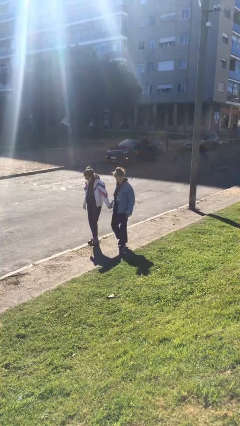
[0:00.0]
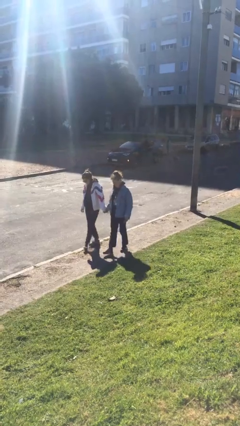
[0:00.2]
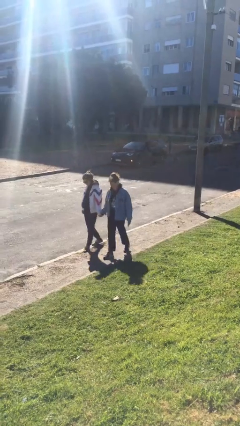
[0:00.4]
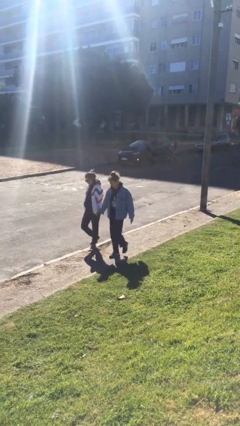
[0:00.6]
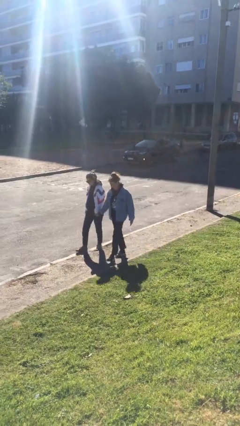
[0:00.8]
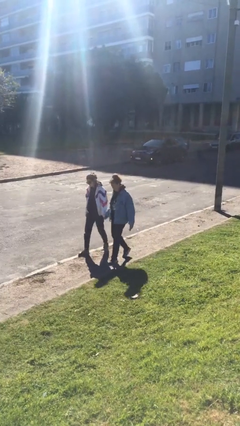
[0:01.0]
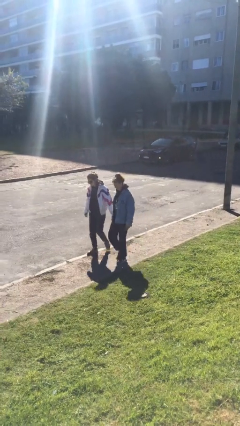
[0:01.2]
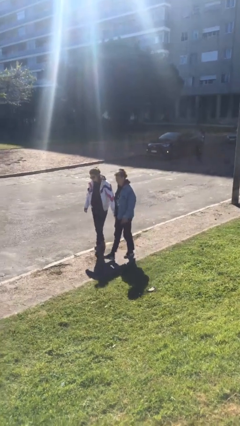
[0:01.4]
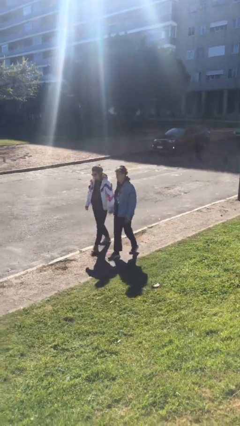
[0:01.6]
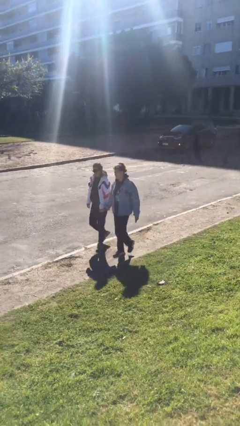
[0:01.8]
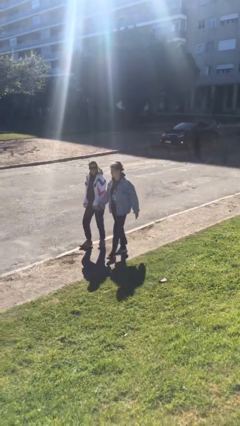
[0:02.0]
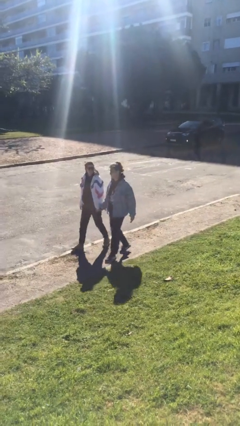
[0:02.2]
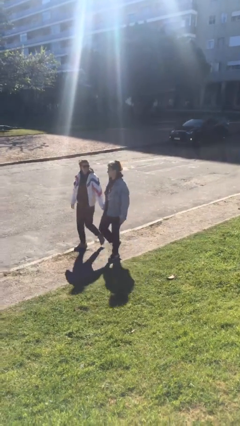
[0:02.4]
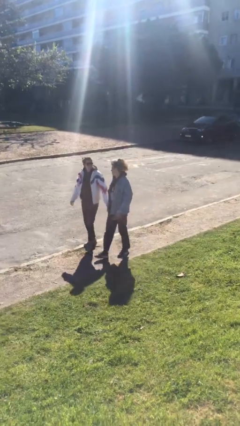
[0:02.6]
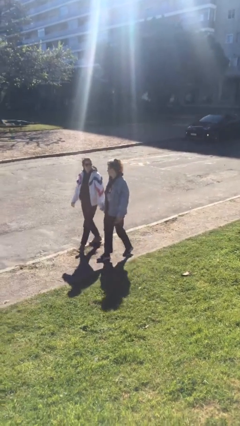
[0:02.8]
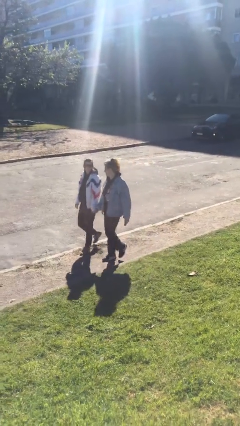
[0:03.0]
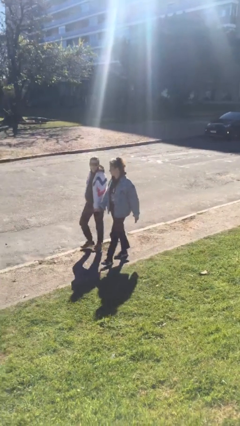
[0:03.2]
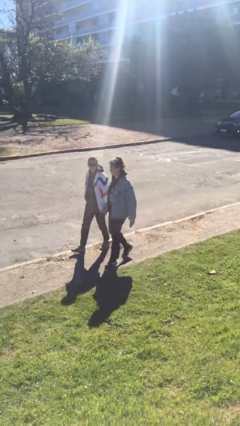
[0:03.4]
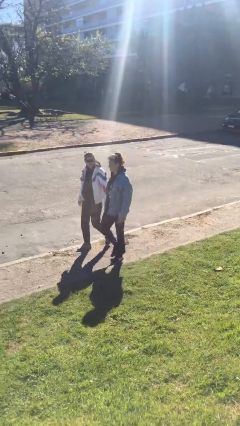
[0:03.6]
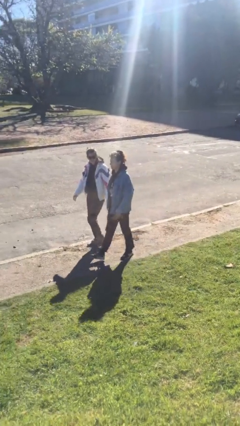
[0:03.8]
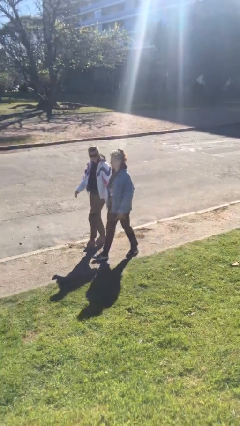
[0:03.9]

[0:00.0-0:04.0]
person holds hand

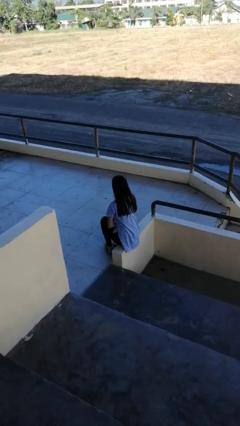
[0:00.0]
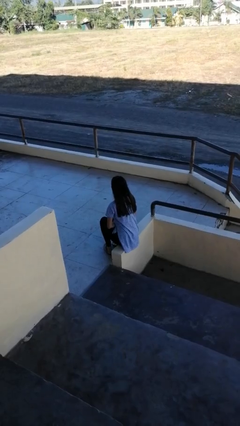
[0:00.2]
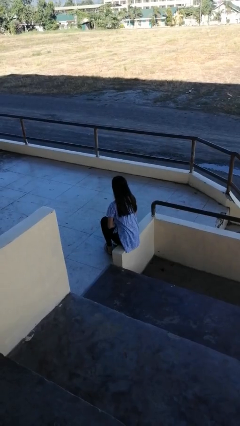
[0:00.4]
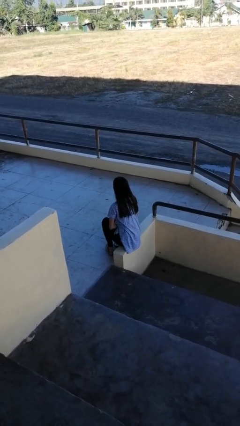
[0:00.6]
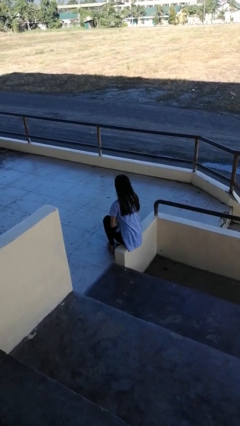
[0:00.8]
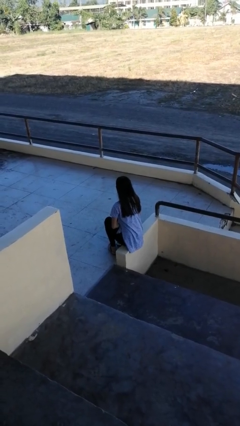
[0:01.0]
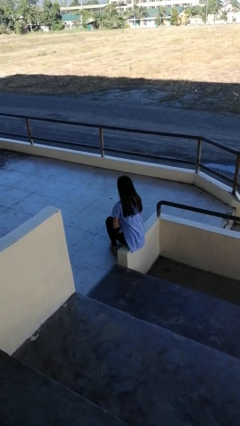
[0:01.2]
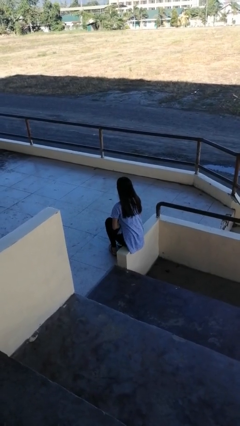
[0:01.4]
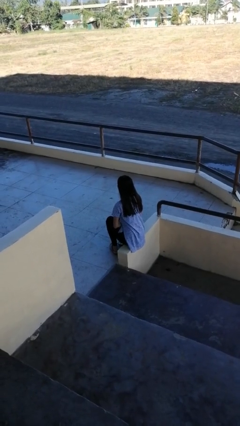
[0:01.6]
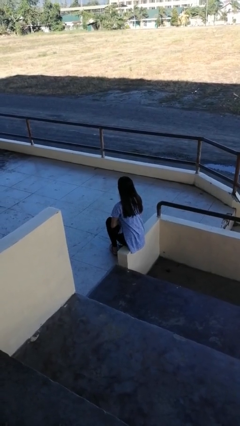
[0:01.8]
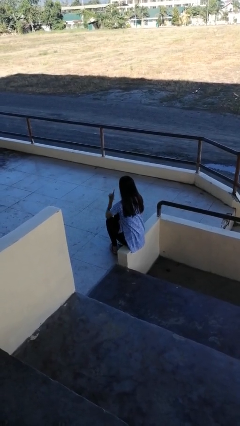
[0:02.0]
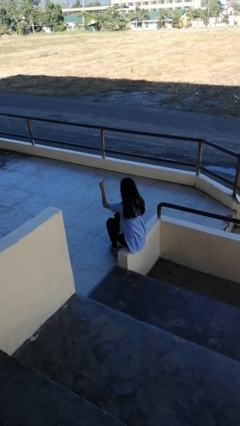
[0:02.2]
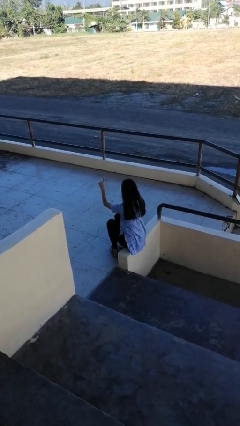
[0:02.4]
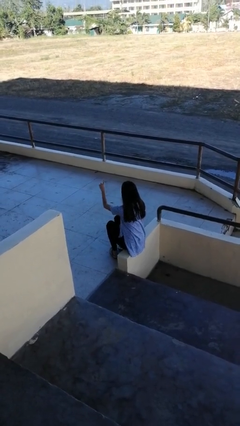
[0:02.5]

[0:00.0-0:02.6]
person gestures number one

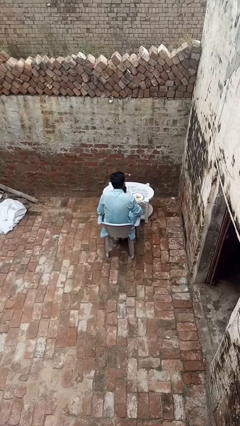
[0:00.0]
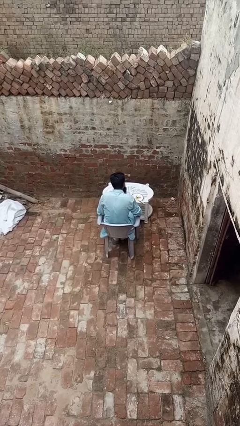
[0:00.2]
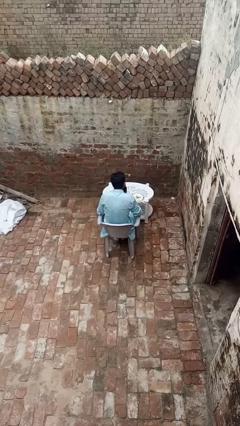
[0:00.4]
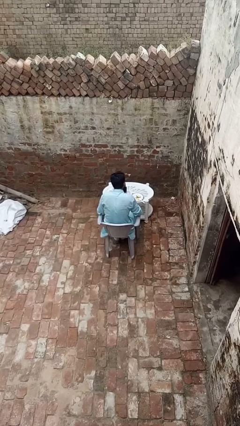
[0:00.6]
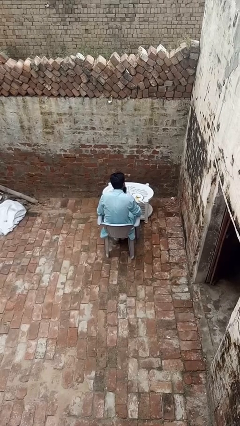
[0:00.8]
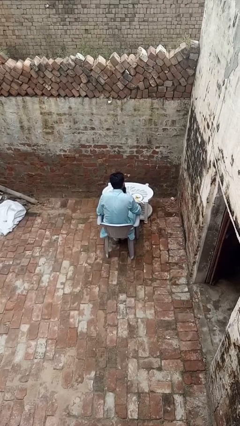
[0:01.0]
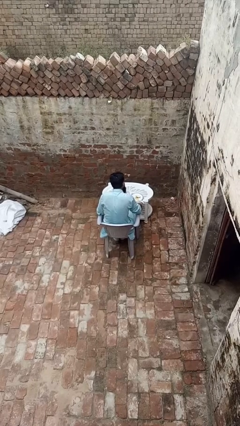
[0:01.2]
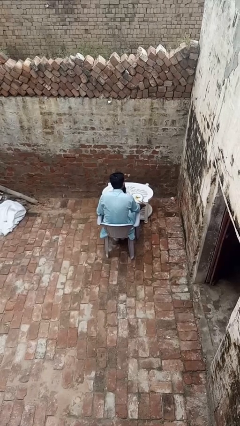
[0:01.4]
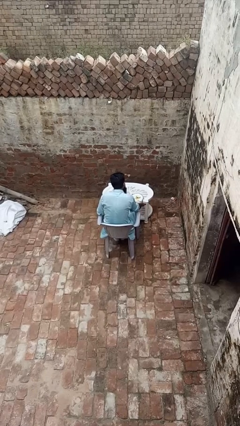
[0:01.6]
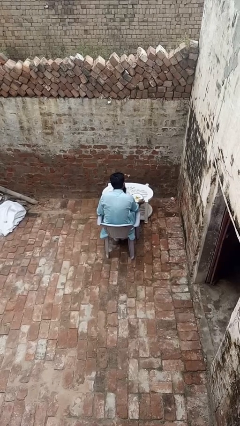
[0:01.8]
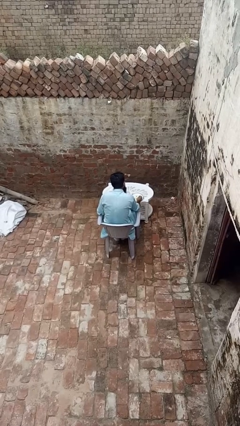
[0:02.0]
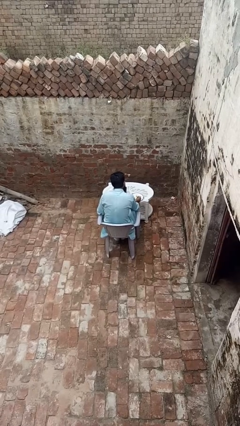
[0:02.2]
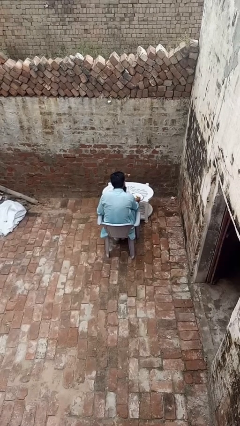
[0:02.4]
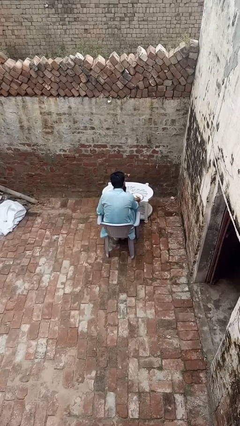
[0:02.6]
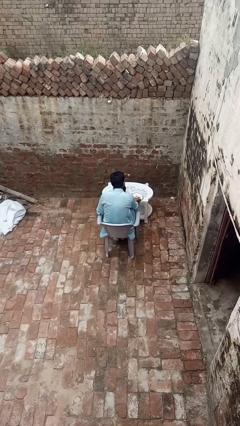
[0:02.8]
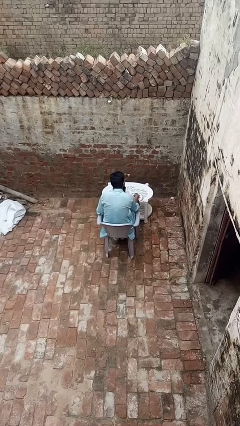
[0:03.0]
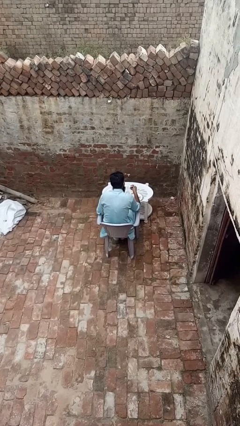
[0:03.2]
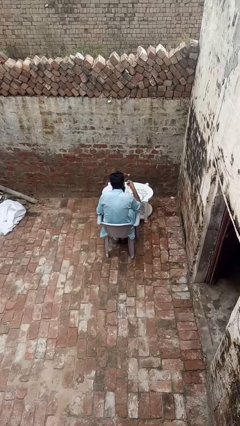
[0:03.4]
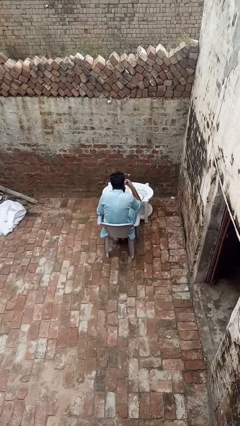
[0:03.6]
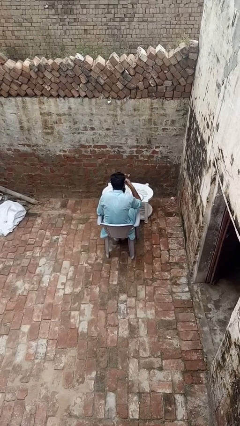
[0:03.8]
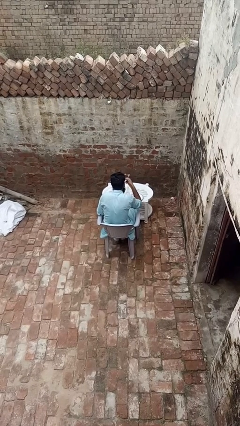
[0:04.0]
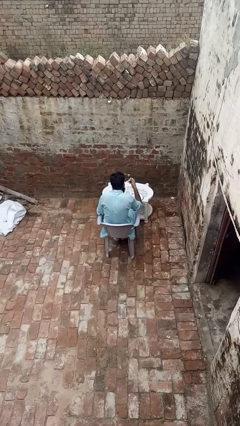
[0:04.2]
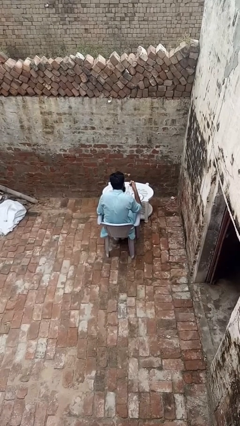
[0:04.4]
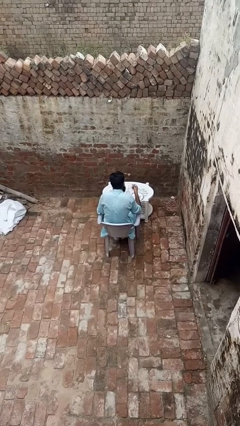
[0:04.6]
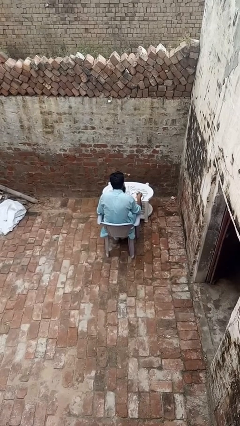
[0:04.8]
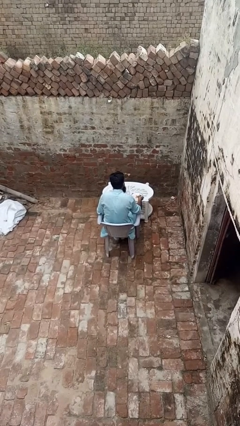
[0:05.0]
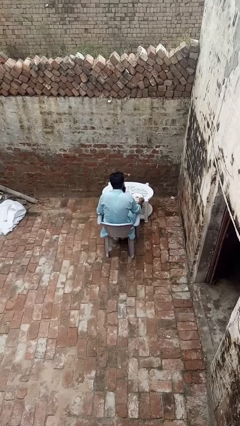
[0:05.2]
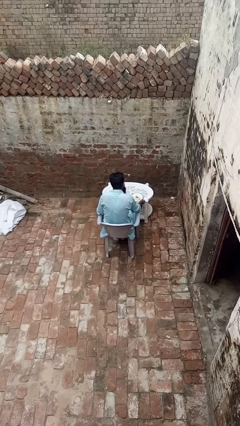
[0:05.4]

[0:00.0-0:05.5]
person eats with utensil

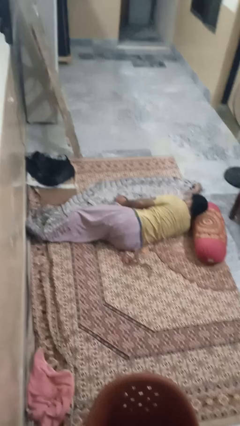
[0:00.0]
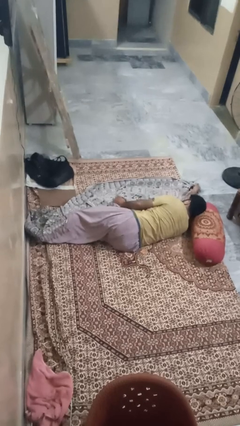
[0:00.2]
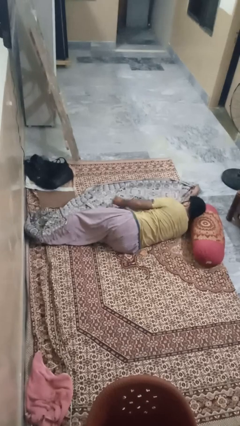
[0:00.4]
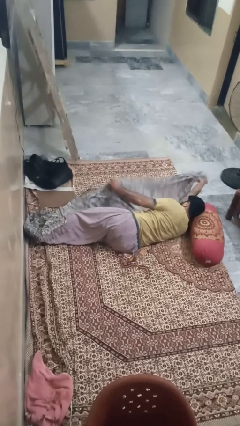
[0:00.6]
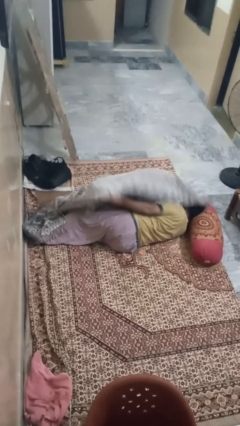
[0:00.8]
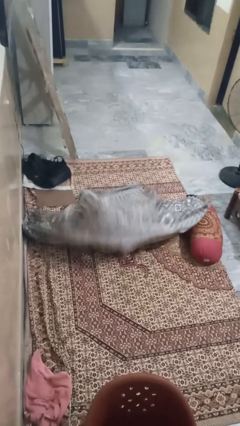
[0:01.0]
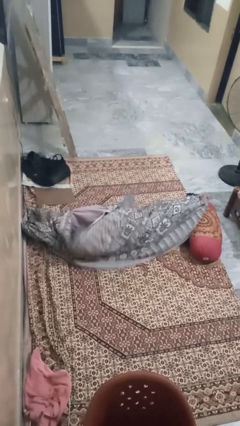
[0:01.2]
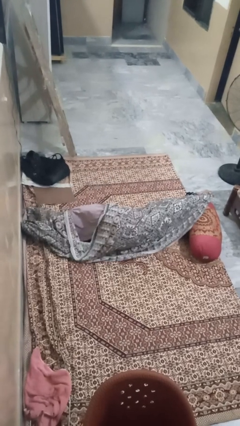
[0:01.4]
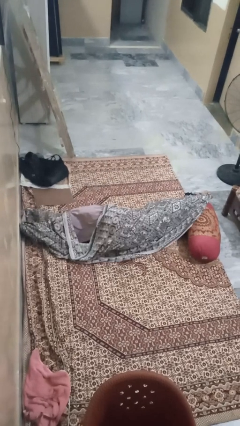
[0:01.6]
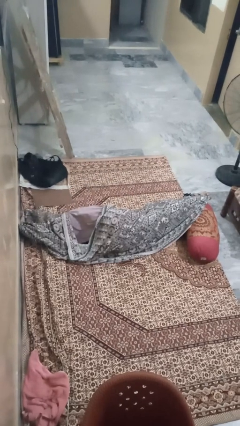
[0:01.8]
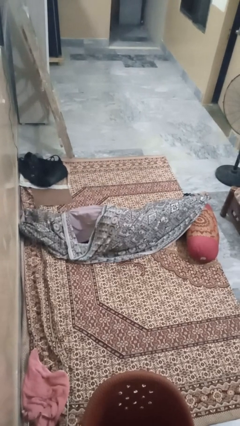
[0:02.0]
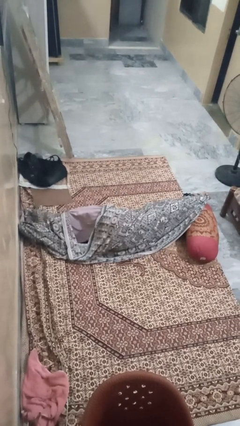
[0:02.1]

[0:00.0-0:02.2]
person covers with blanket

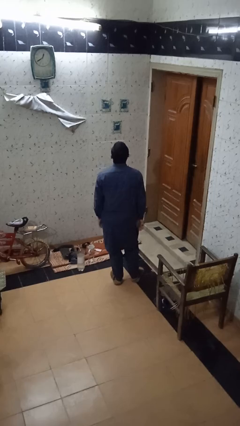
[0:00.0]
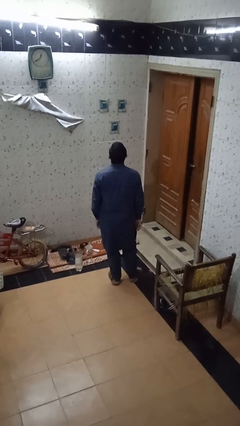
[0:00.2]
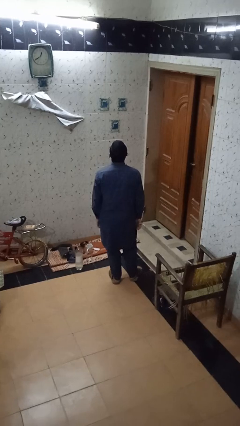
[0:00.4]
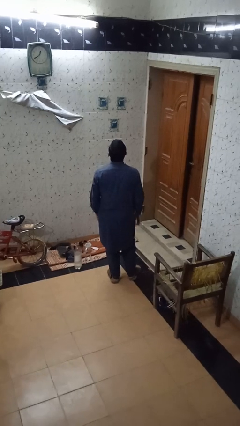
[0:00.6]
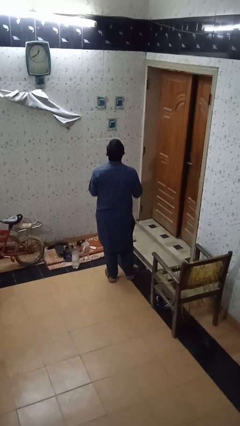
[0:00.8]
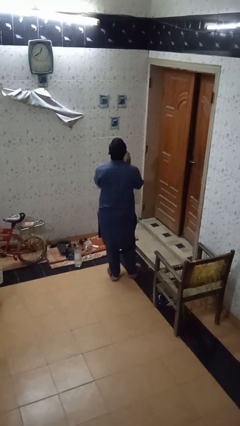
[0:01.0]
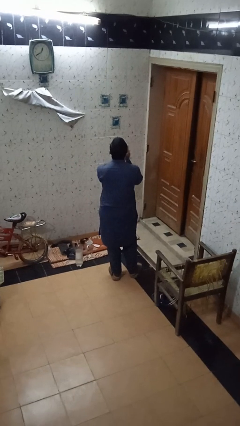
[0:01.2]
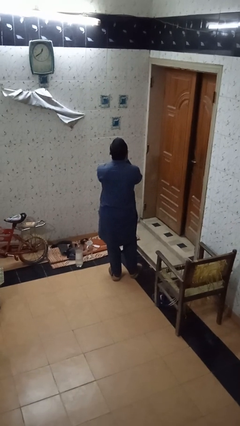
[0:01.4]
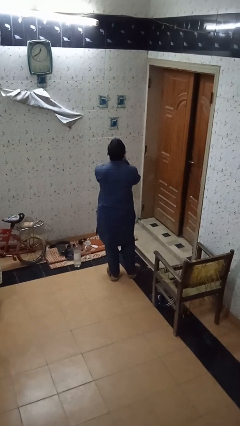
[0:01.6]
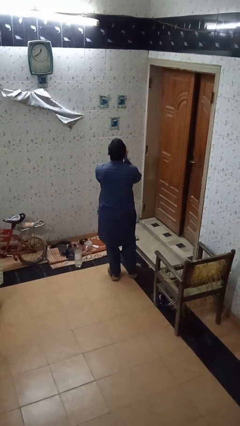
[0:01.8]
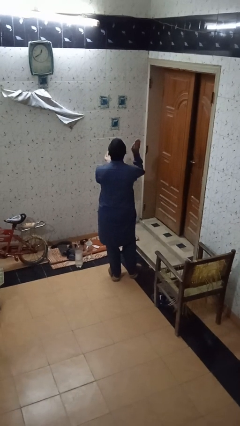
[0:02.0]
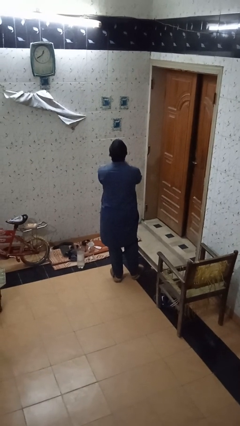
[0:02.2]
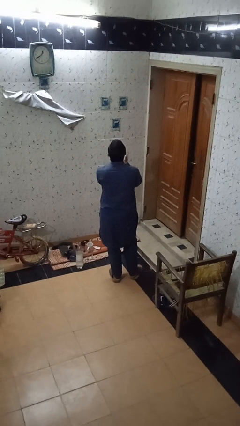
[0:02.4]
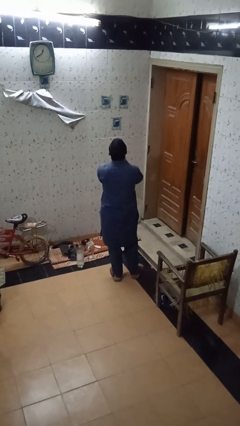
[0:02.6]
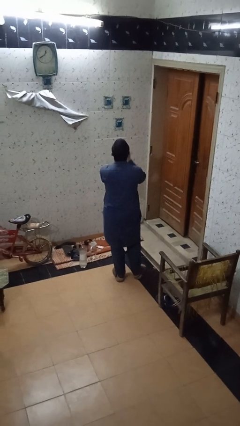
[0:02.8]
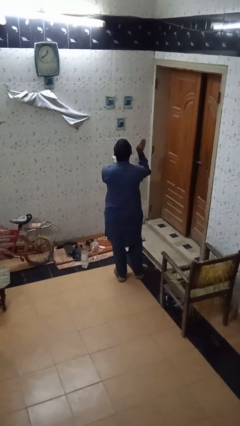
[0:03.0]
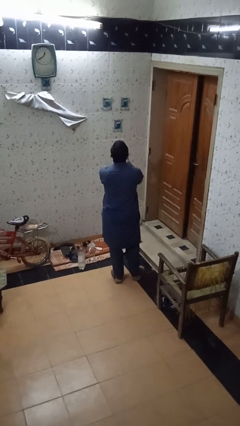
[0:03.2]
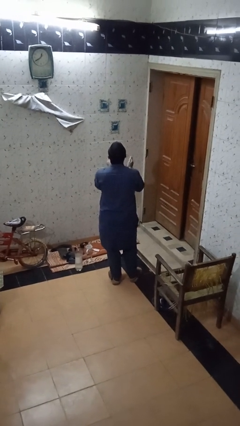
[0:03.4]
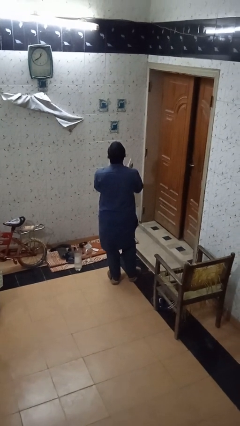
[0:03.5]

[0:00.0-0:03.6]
person claps hands
